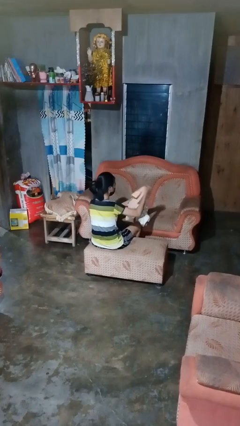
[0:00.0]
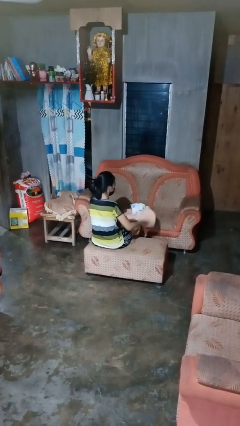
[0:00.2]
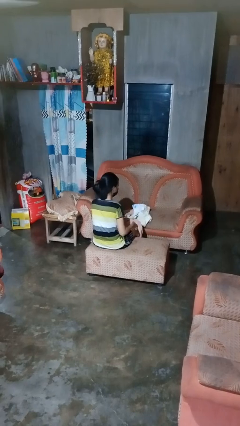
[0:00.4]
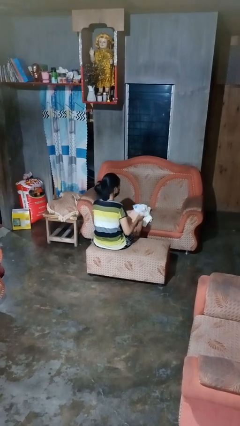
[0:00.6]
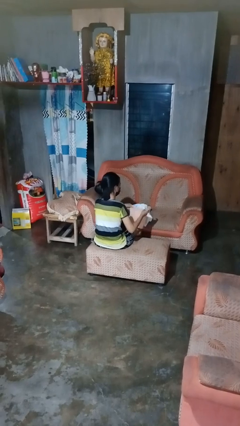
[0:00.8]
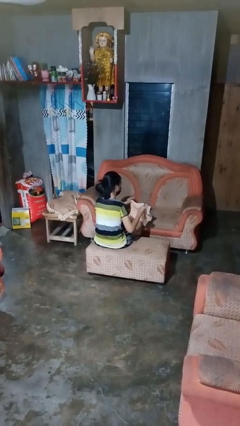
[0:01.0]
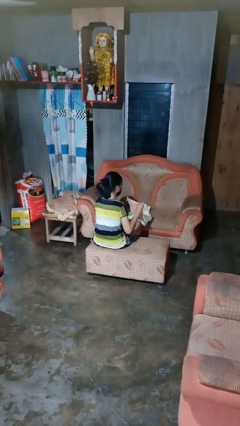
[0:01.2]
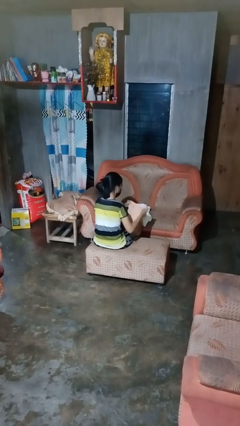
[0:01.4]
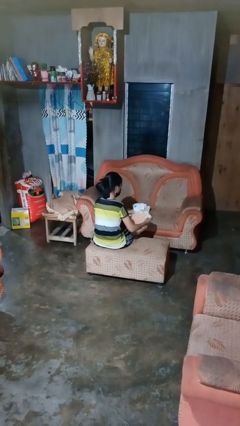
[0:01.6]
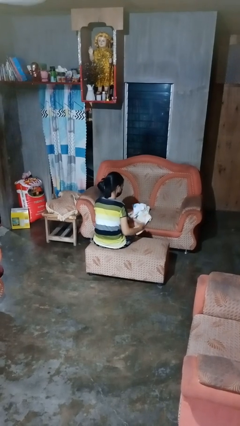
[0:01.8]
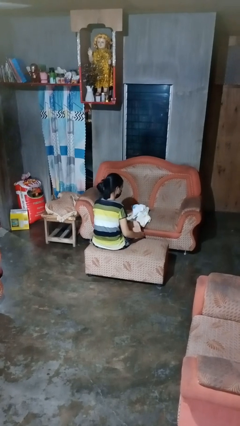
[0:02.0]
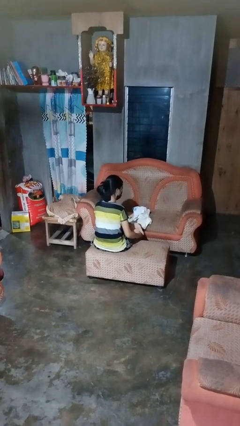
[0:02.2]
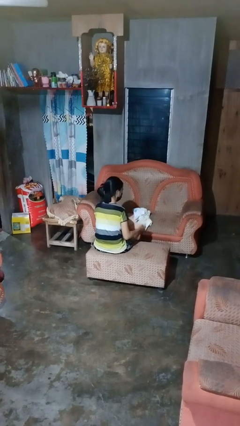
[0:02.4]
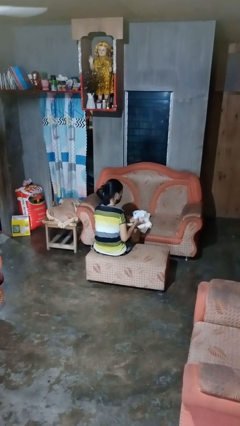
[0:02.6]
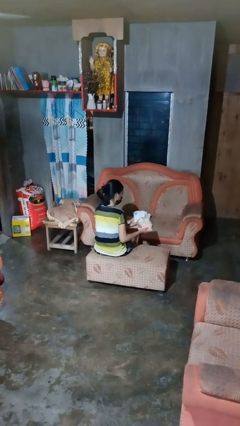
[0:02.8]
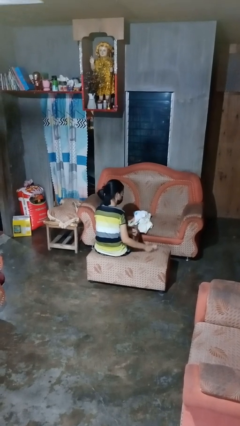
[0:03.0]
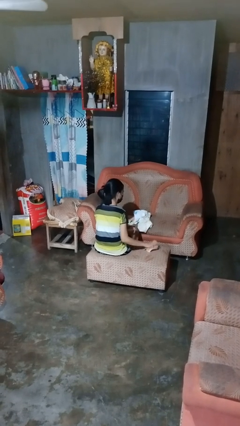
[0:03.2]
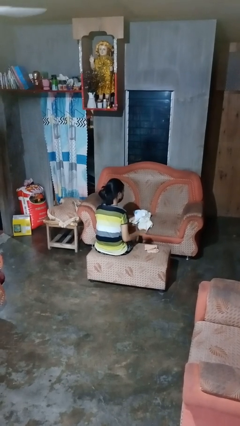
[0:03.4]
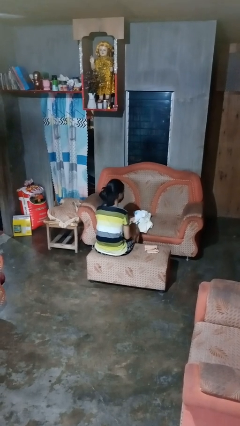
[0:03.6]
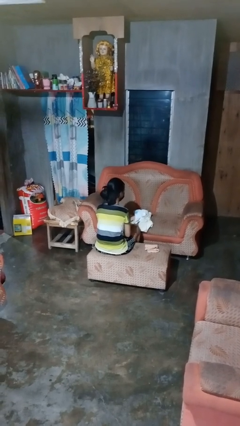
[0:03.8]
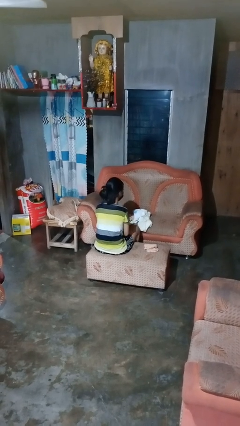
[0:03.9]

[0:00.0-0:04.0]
person folds towel

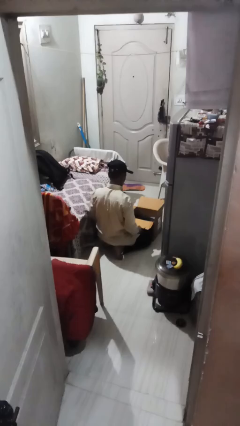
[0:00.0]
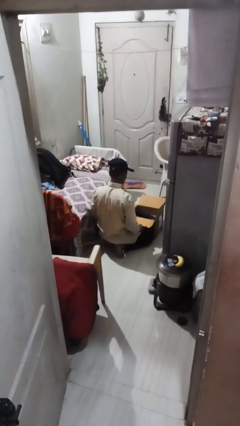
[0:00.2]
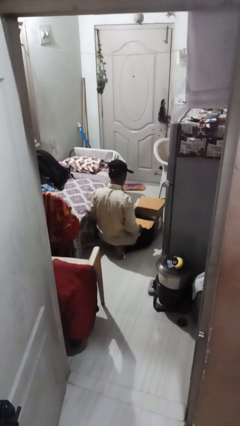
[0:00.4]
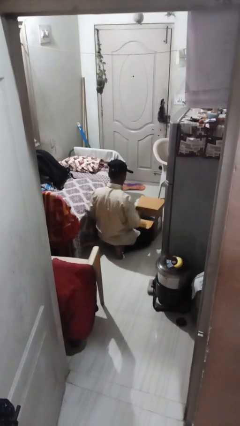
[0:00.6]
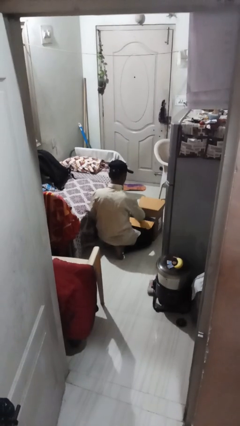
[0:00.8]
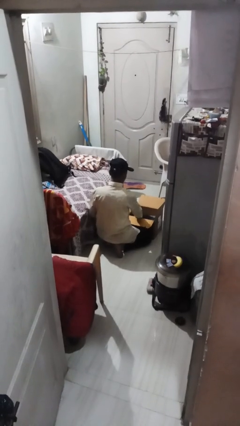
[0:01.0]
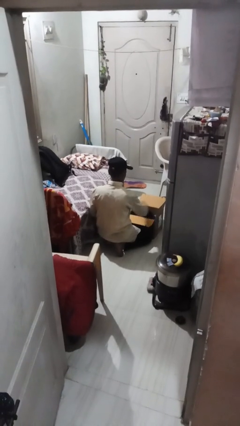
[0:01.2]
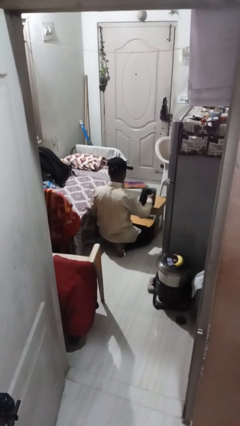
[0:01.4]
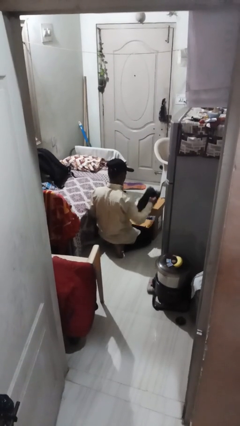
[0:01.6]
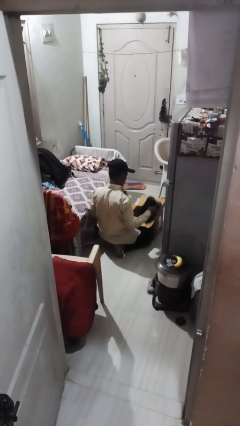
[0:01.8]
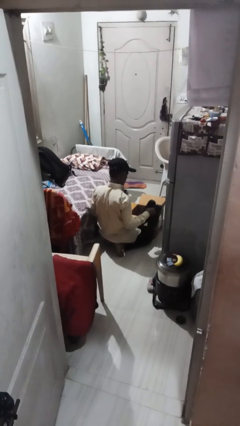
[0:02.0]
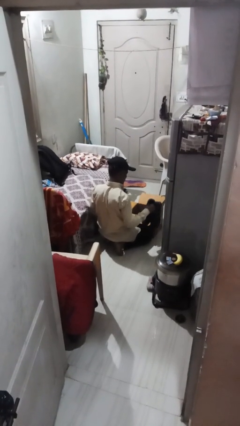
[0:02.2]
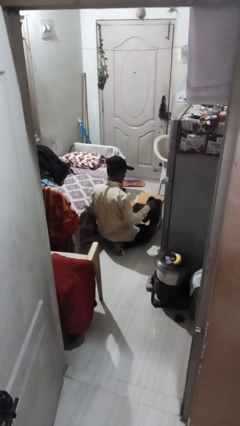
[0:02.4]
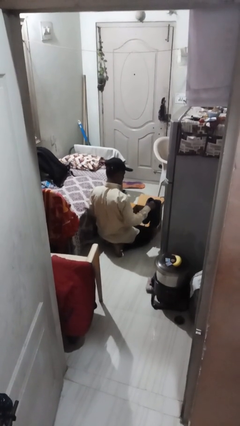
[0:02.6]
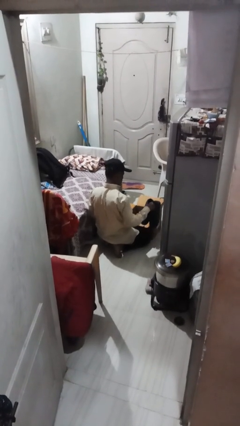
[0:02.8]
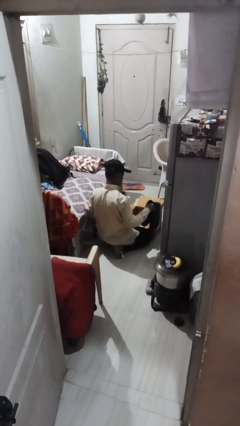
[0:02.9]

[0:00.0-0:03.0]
person takes object from box

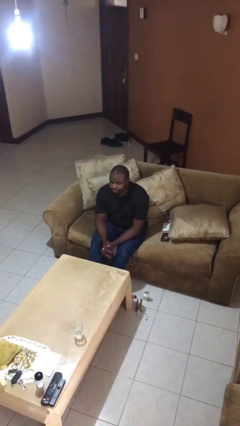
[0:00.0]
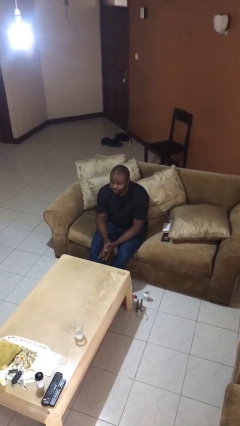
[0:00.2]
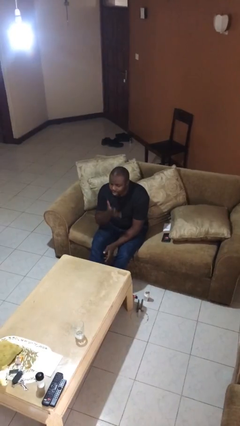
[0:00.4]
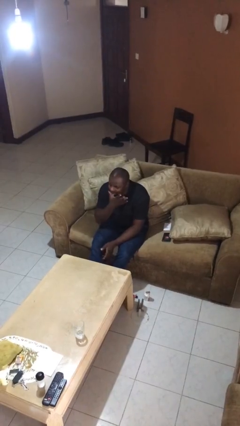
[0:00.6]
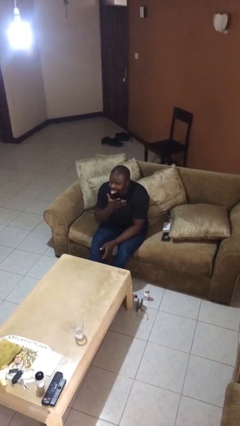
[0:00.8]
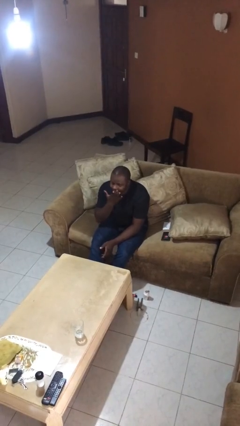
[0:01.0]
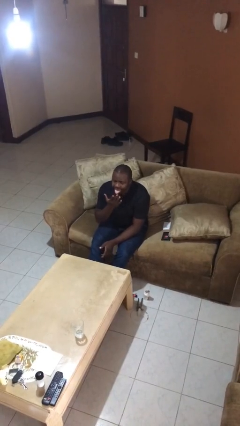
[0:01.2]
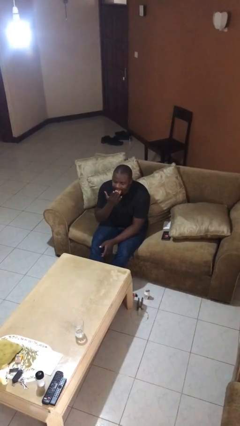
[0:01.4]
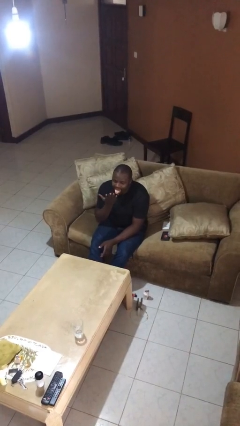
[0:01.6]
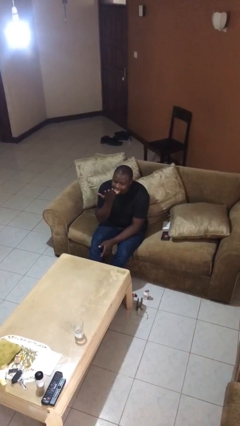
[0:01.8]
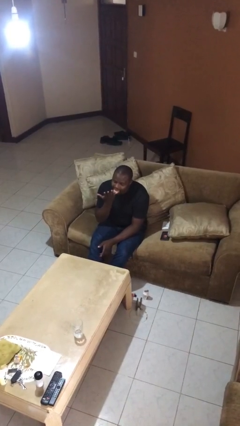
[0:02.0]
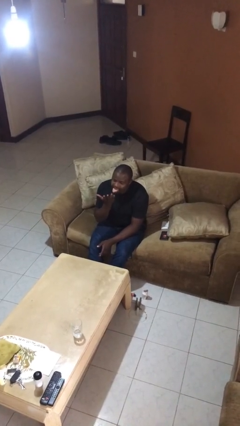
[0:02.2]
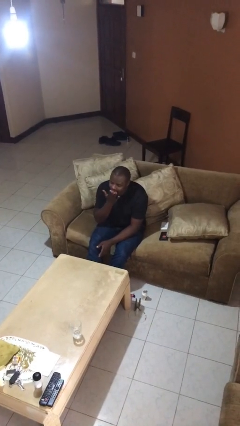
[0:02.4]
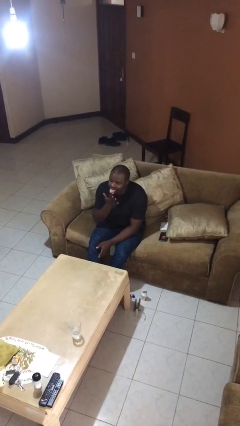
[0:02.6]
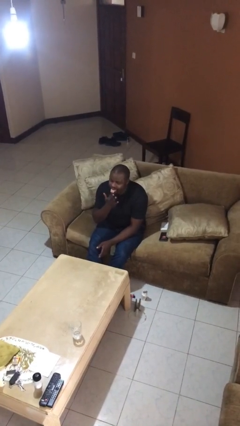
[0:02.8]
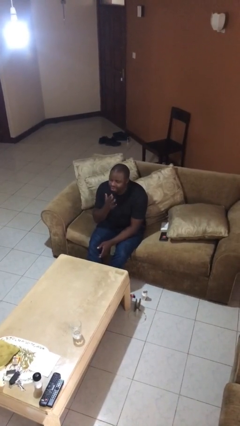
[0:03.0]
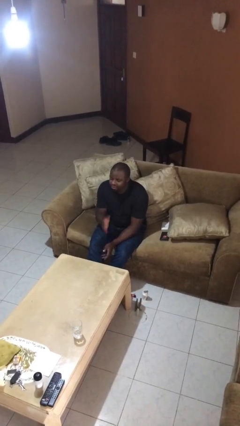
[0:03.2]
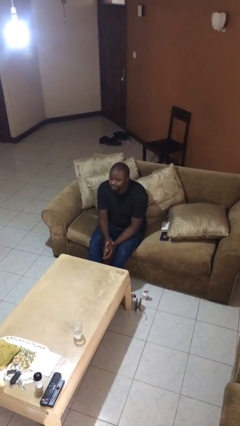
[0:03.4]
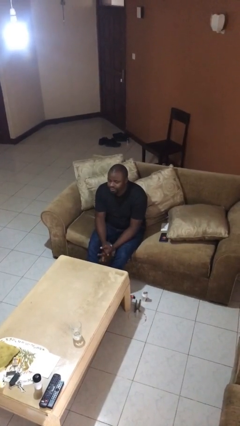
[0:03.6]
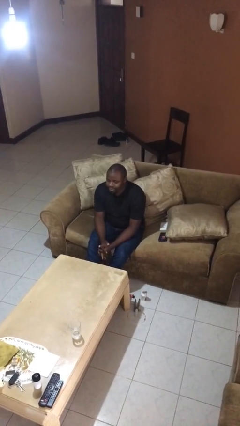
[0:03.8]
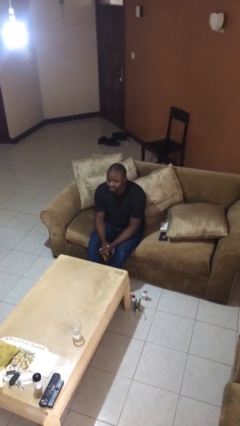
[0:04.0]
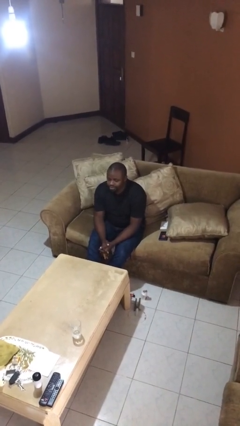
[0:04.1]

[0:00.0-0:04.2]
person licks fingers

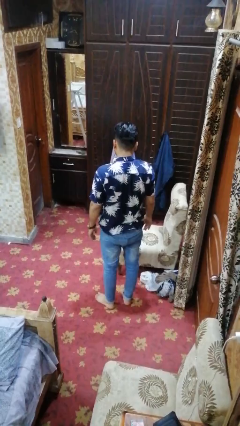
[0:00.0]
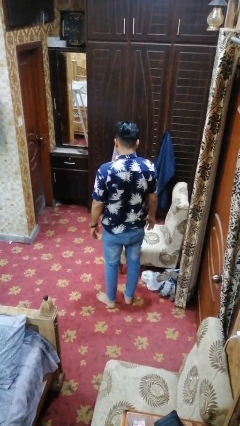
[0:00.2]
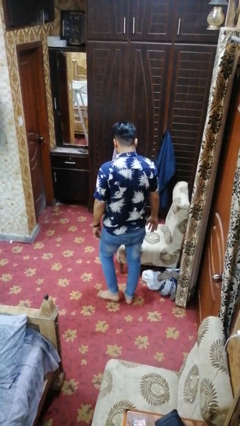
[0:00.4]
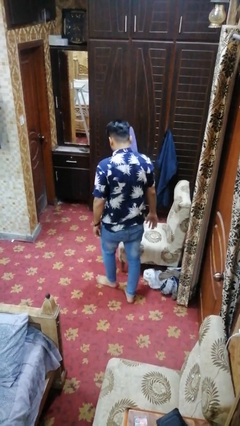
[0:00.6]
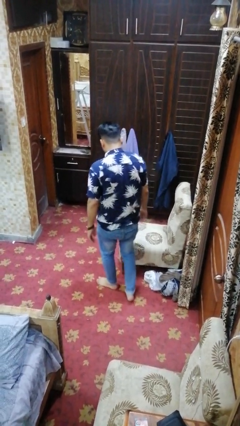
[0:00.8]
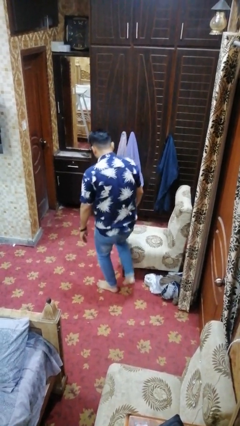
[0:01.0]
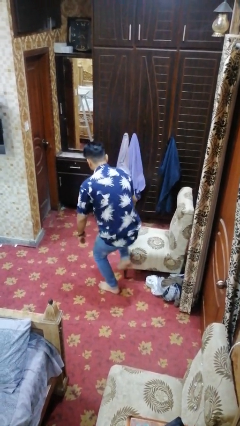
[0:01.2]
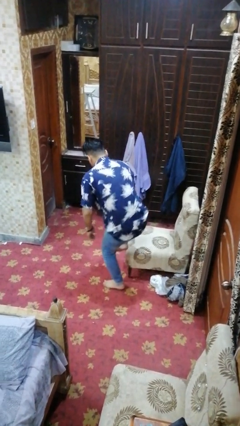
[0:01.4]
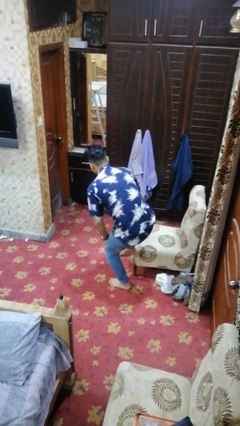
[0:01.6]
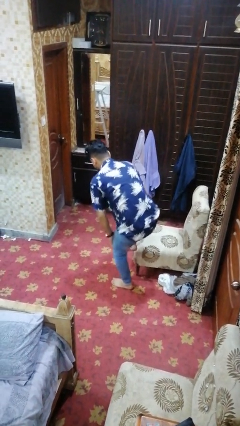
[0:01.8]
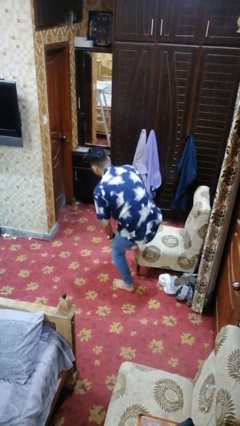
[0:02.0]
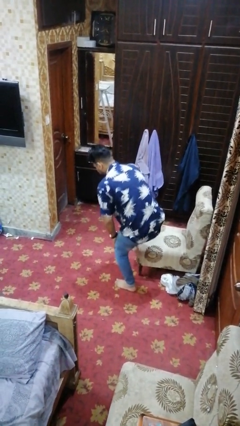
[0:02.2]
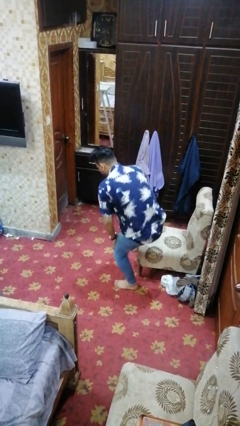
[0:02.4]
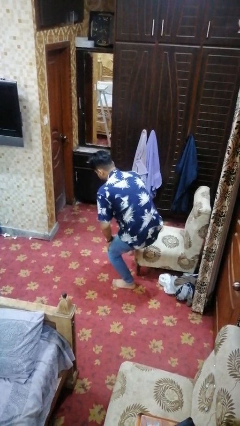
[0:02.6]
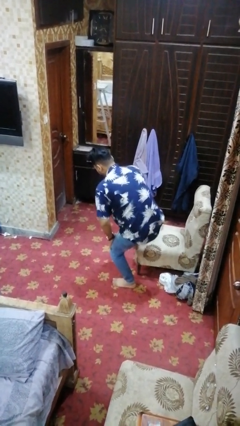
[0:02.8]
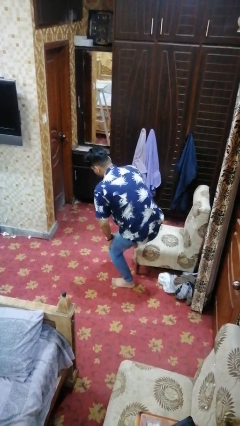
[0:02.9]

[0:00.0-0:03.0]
person trips on object on floor

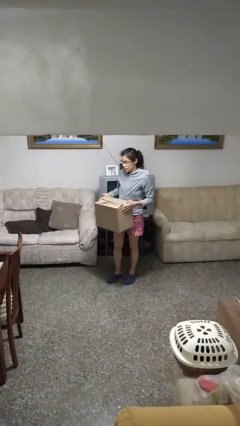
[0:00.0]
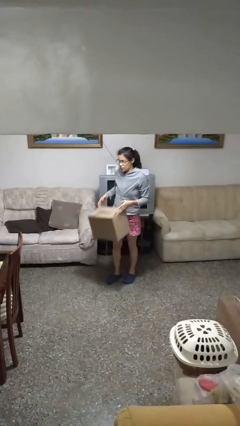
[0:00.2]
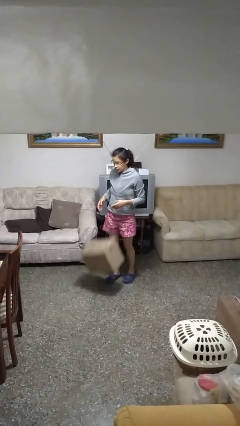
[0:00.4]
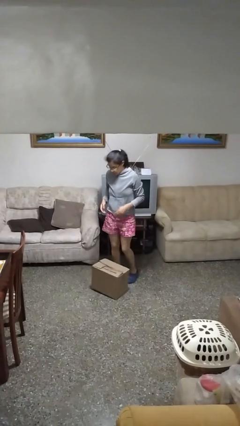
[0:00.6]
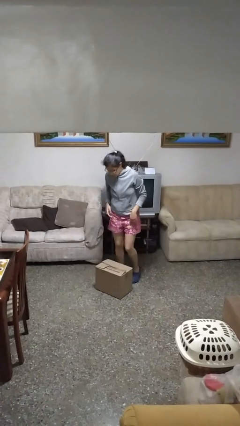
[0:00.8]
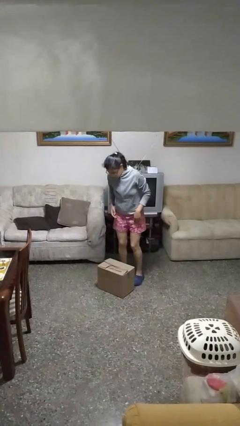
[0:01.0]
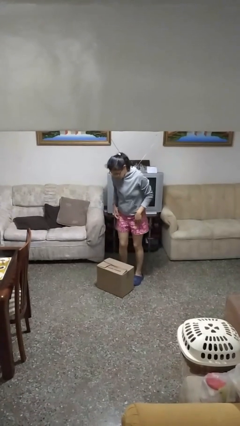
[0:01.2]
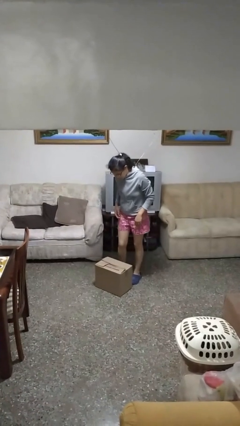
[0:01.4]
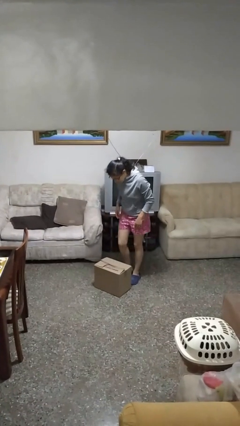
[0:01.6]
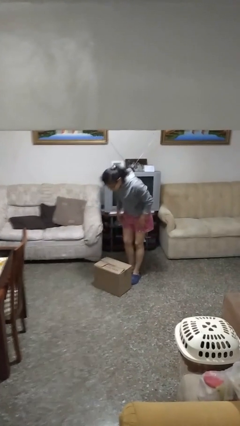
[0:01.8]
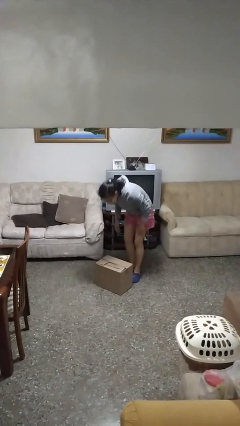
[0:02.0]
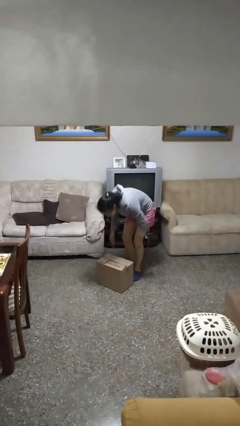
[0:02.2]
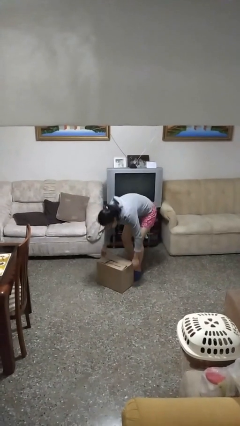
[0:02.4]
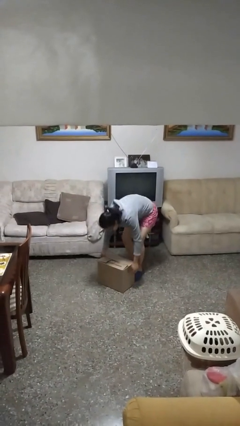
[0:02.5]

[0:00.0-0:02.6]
person drops object

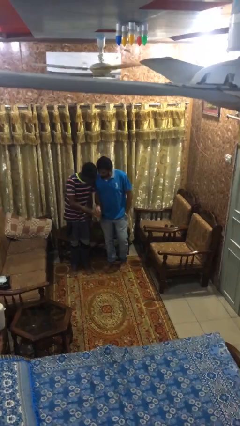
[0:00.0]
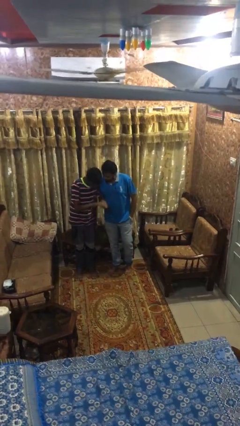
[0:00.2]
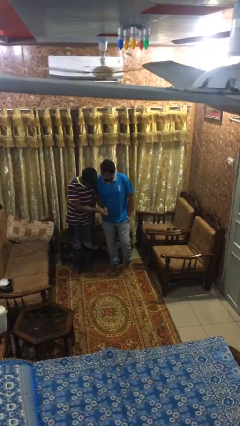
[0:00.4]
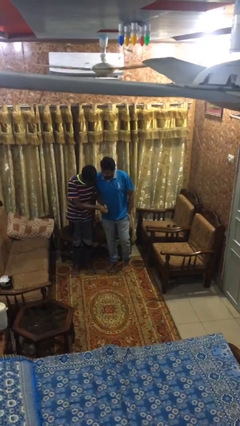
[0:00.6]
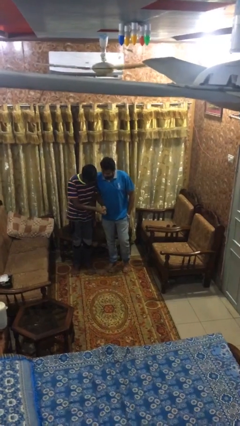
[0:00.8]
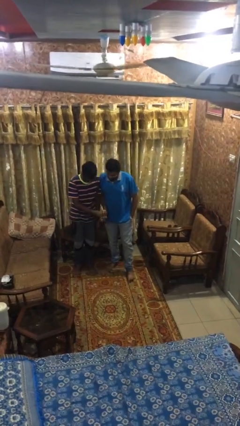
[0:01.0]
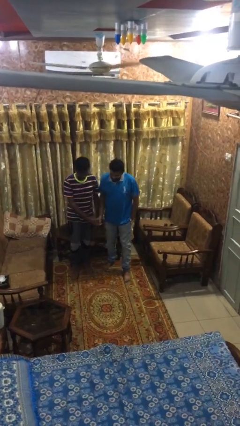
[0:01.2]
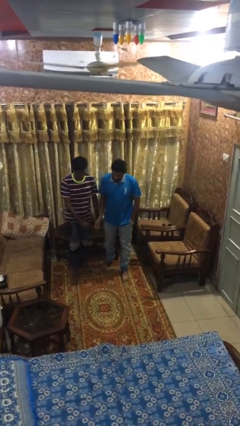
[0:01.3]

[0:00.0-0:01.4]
person shakes hand
